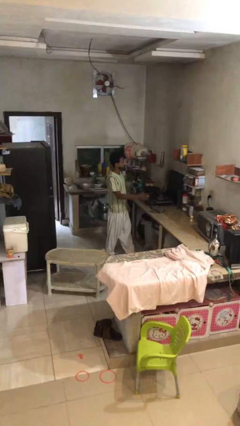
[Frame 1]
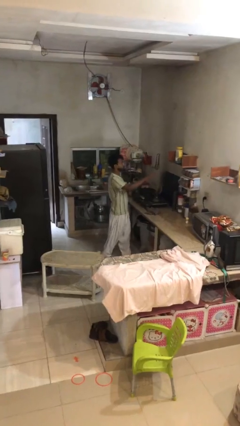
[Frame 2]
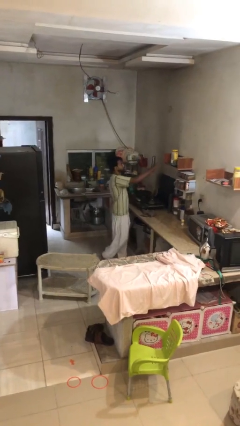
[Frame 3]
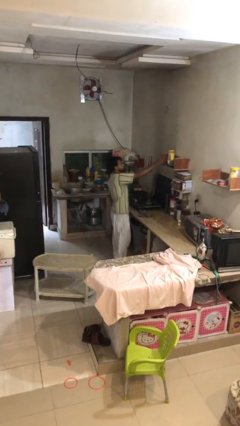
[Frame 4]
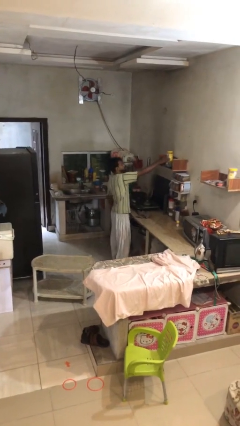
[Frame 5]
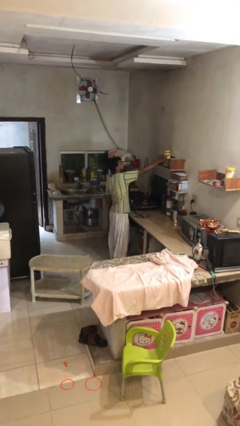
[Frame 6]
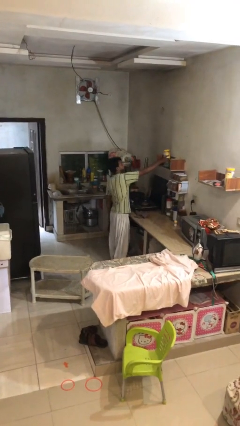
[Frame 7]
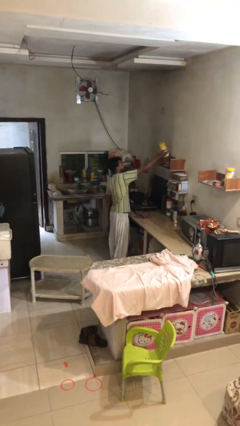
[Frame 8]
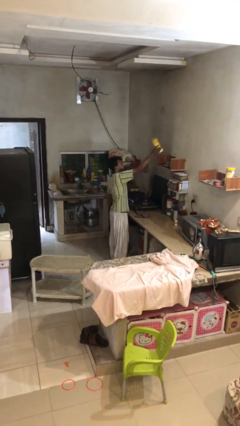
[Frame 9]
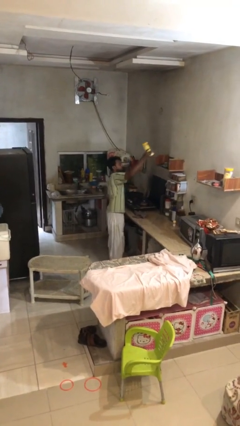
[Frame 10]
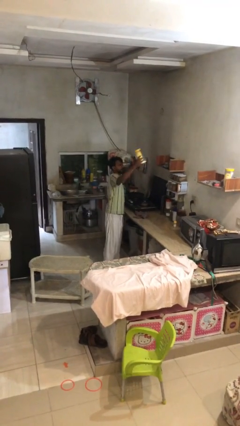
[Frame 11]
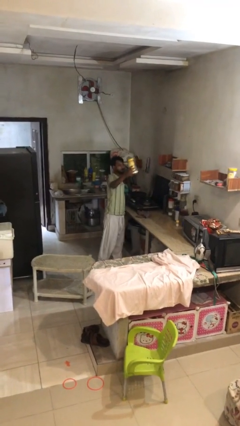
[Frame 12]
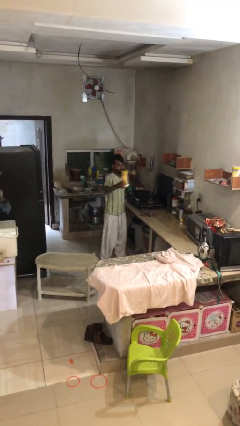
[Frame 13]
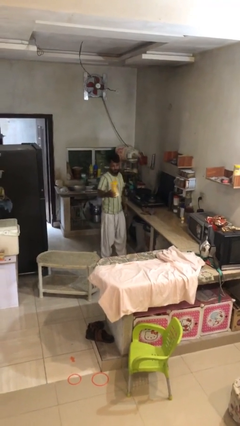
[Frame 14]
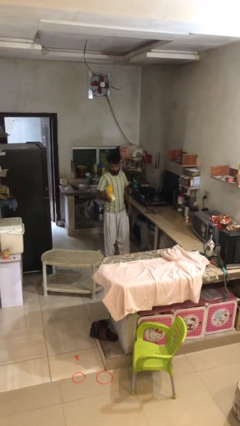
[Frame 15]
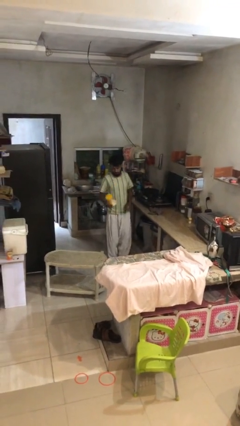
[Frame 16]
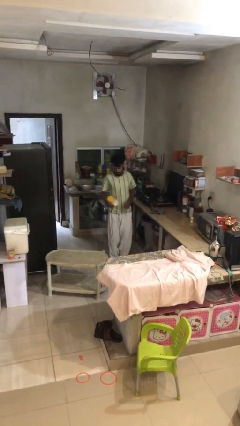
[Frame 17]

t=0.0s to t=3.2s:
person picks up object from shelf

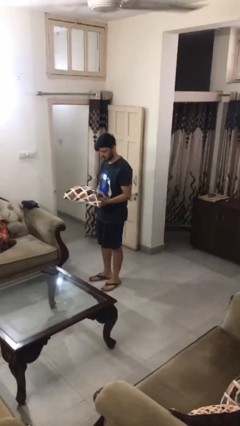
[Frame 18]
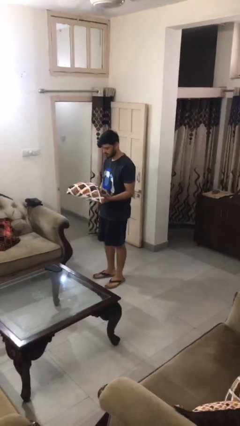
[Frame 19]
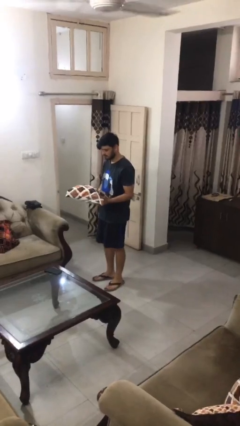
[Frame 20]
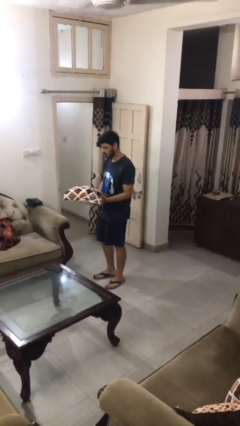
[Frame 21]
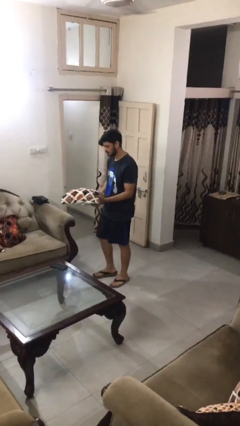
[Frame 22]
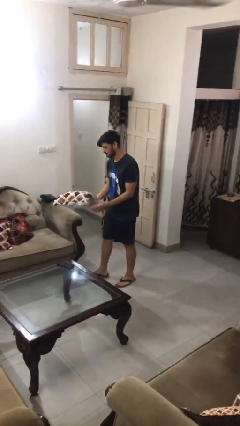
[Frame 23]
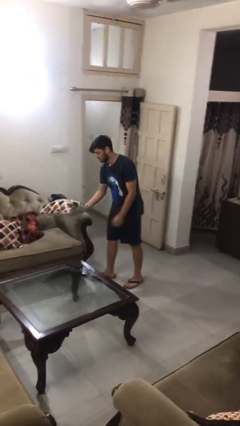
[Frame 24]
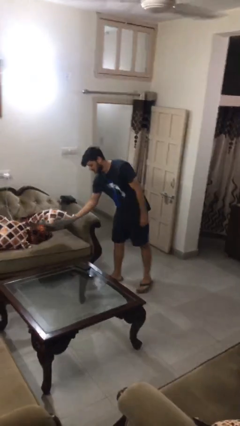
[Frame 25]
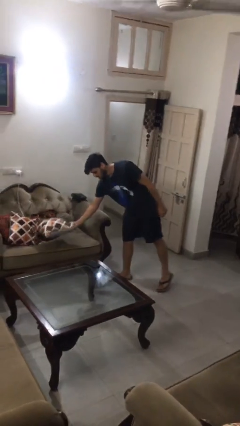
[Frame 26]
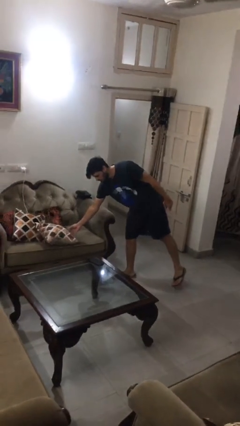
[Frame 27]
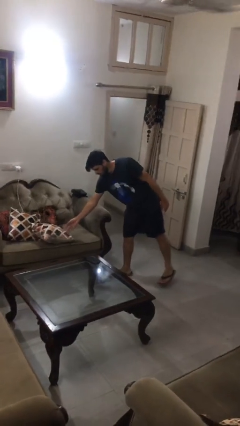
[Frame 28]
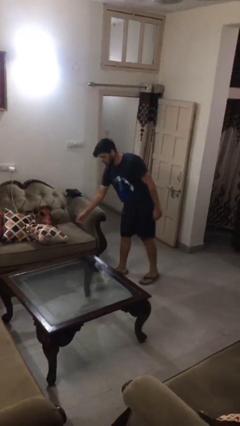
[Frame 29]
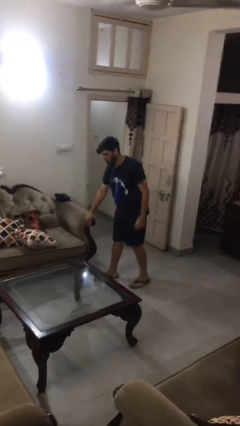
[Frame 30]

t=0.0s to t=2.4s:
person puts down object on couch

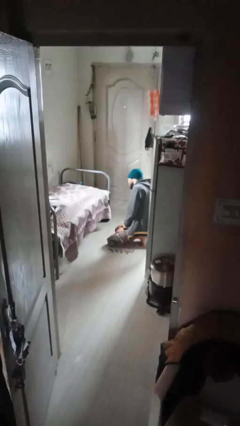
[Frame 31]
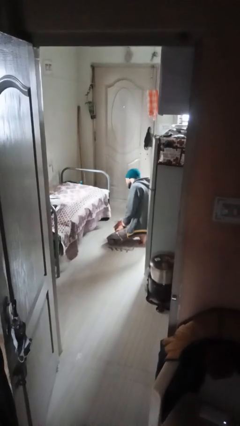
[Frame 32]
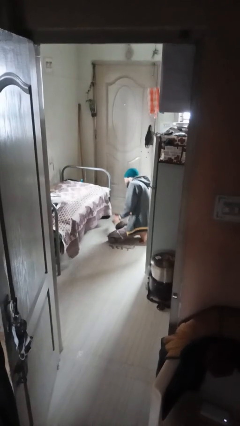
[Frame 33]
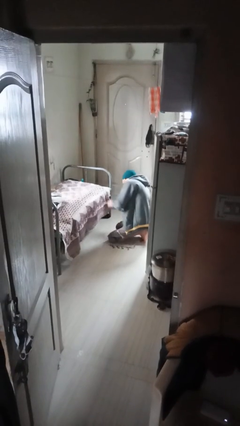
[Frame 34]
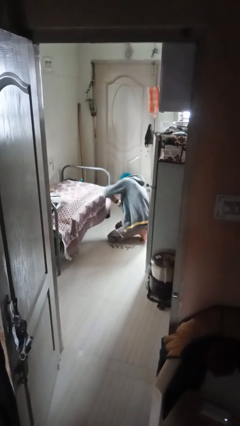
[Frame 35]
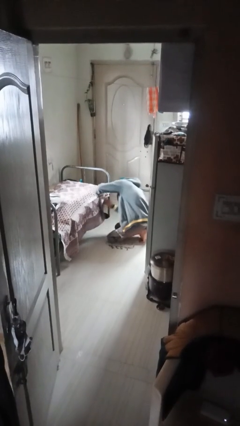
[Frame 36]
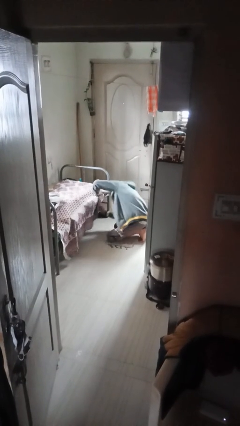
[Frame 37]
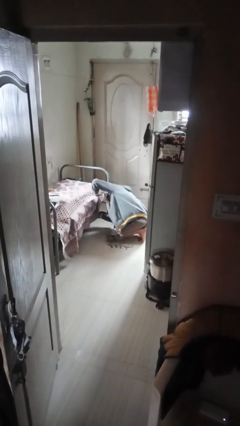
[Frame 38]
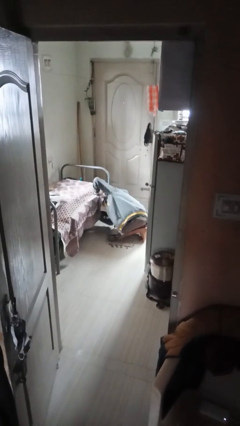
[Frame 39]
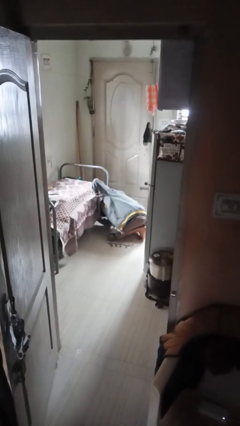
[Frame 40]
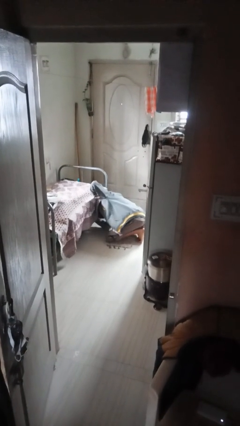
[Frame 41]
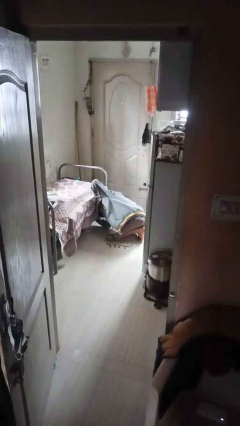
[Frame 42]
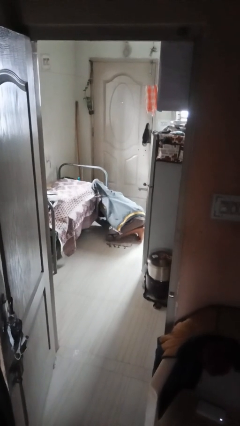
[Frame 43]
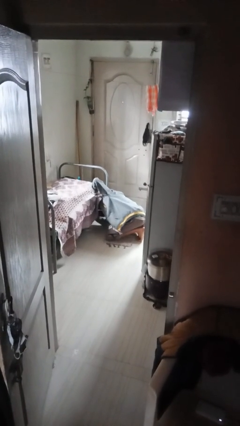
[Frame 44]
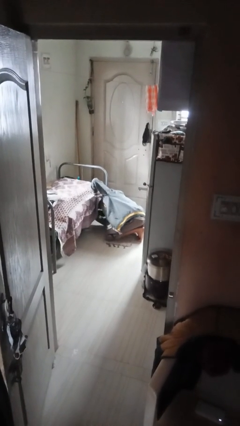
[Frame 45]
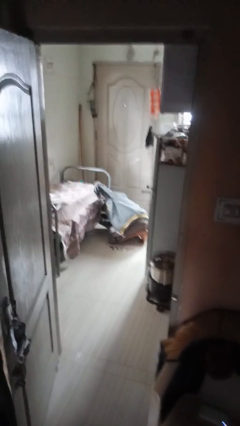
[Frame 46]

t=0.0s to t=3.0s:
person searches under bed

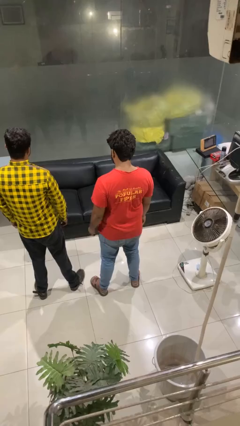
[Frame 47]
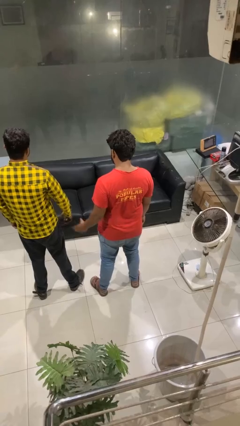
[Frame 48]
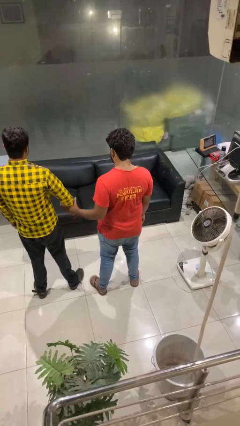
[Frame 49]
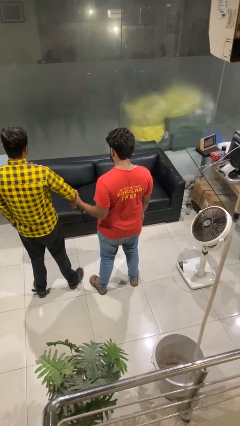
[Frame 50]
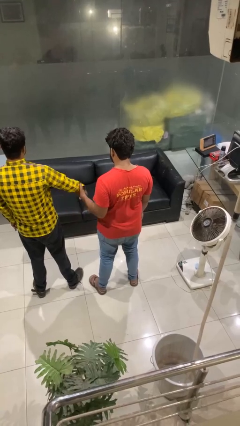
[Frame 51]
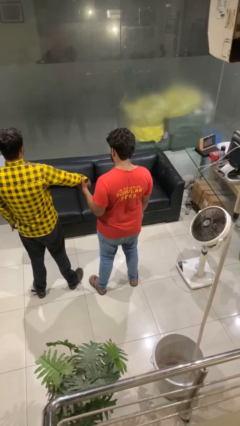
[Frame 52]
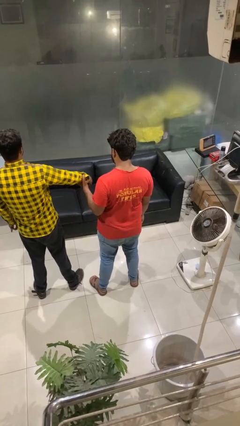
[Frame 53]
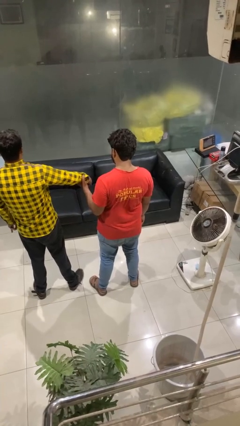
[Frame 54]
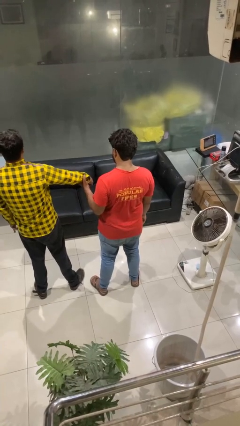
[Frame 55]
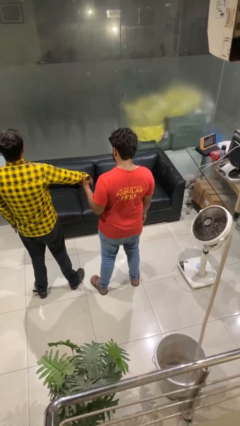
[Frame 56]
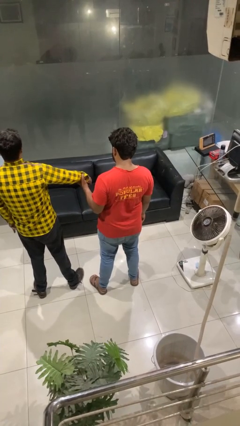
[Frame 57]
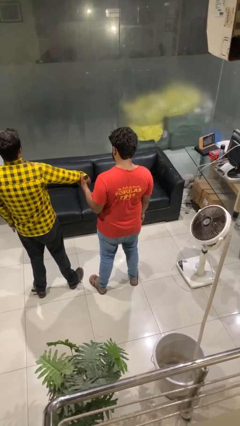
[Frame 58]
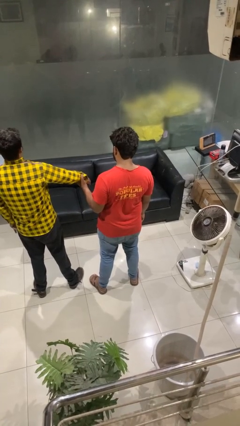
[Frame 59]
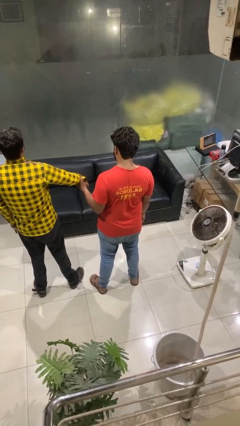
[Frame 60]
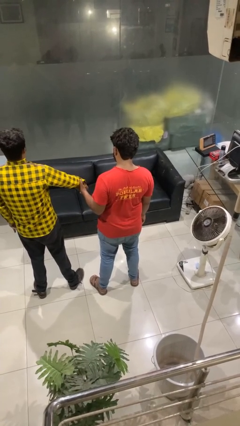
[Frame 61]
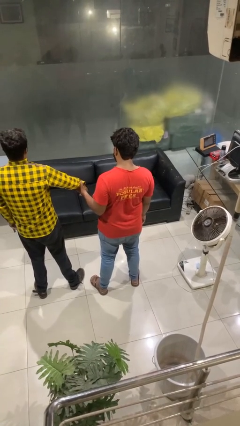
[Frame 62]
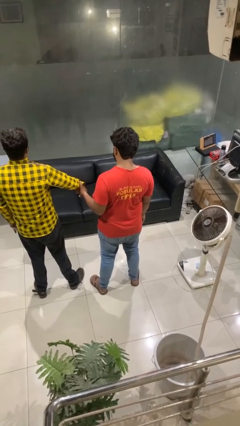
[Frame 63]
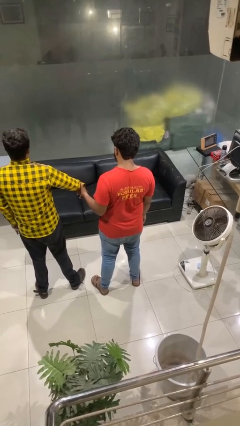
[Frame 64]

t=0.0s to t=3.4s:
person grabs person by forearm

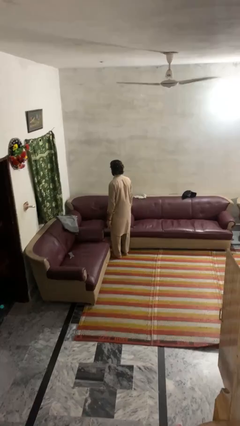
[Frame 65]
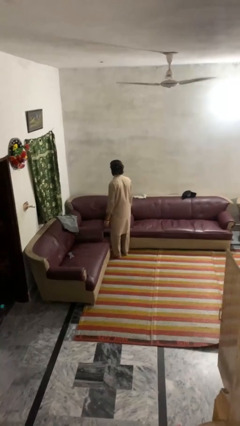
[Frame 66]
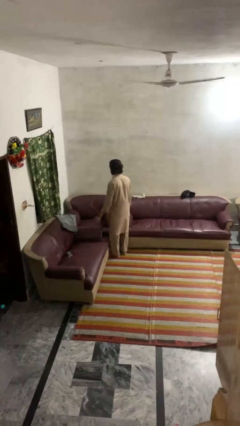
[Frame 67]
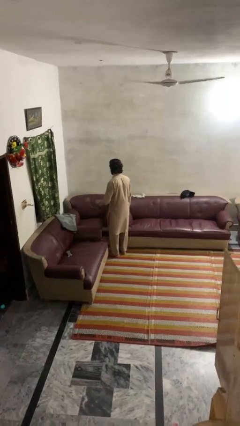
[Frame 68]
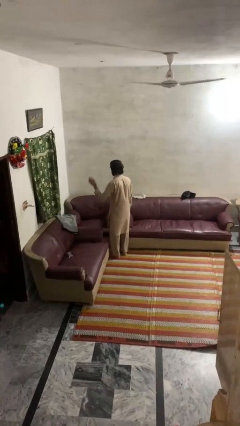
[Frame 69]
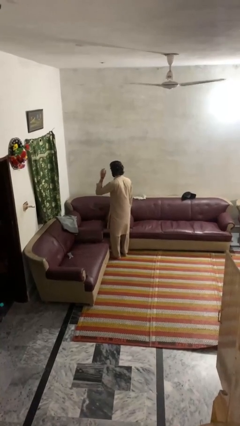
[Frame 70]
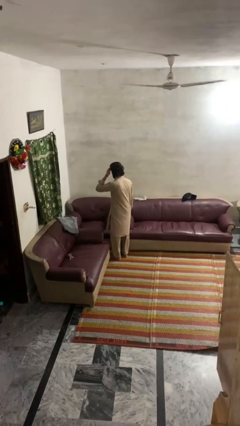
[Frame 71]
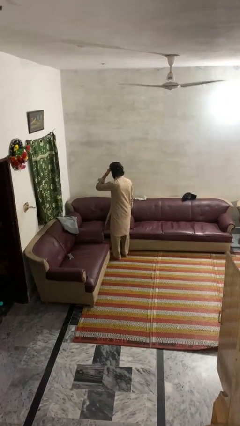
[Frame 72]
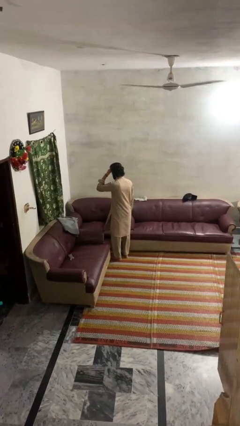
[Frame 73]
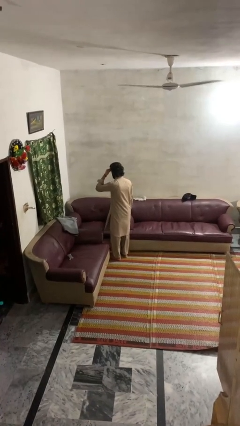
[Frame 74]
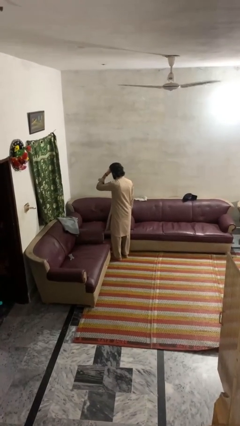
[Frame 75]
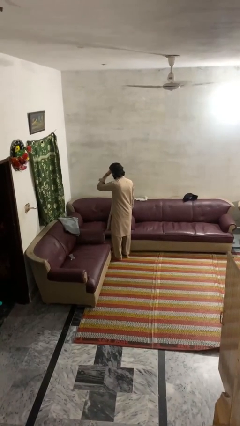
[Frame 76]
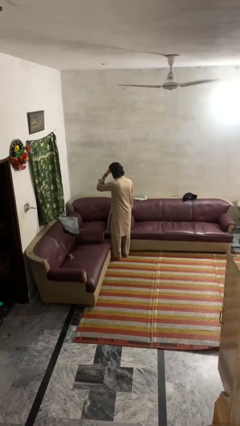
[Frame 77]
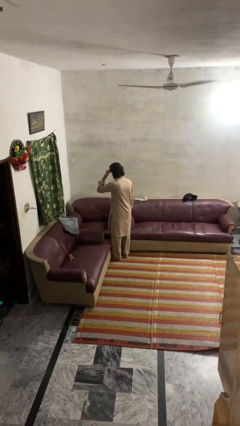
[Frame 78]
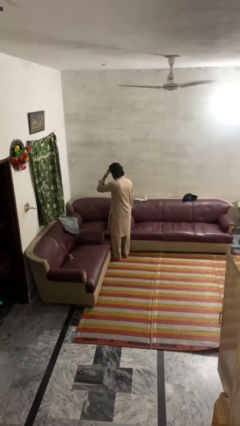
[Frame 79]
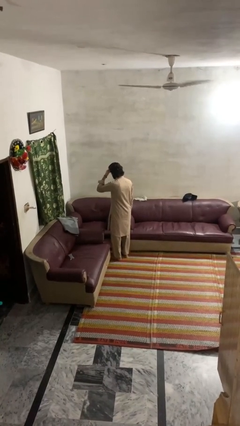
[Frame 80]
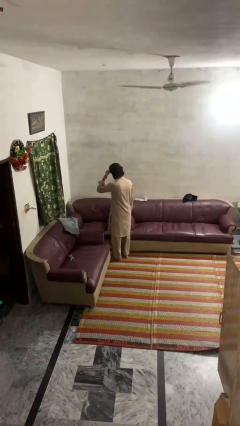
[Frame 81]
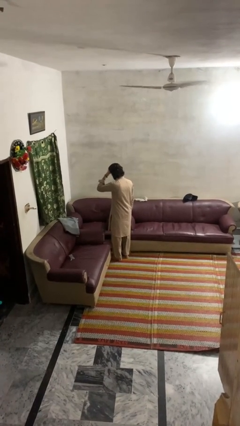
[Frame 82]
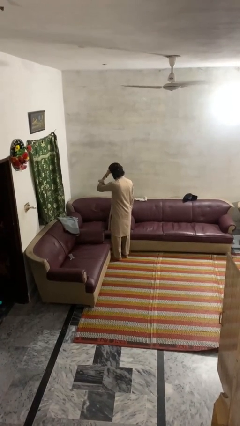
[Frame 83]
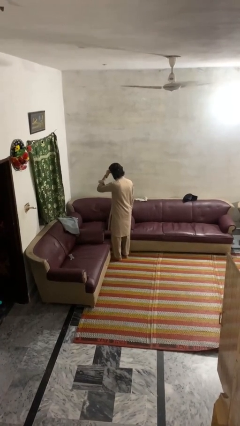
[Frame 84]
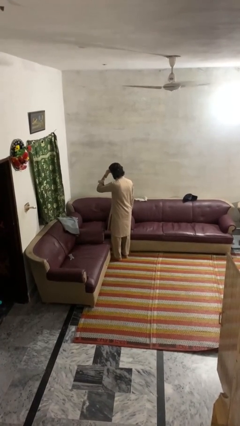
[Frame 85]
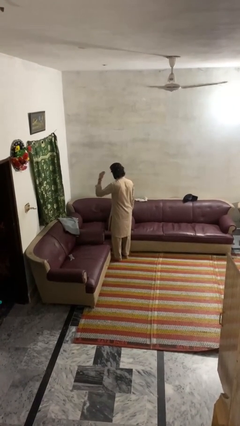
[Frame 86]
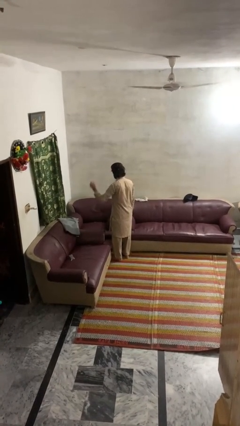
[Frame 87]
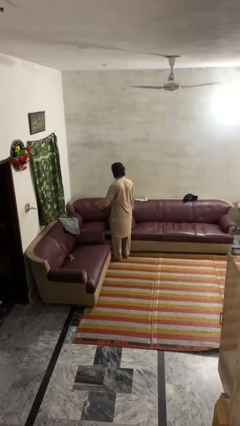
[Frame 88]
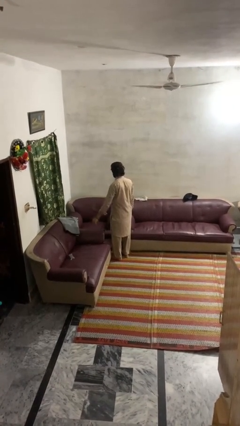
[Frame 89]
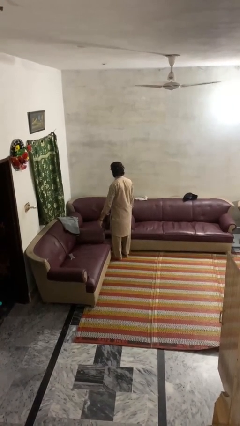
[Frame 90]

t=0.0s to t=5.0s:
person scratches face

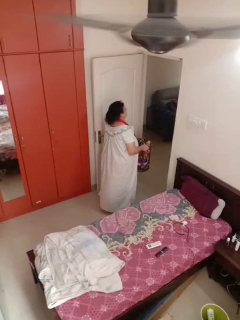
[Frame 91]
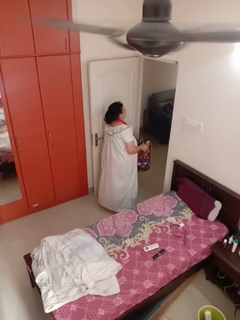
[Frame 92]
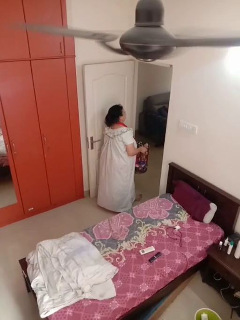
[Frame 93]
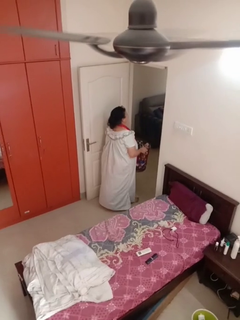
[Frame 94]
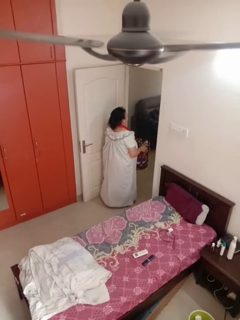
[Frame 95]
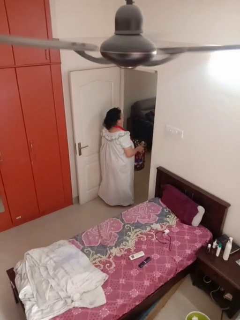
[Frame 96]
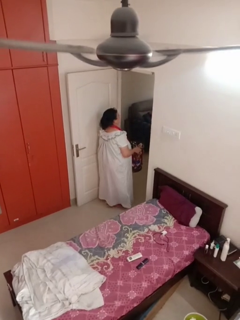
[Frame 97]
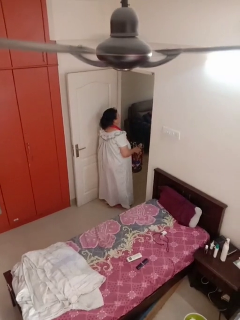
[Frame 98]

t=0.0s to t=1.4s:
person carries laundry basket
